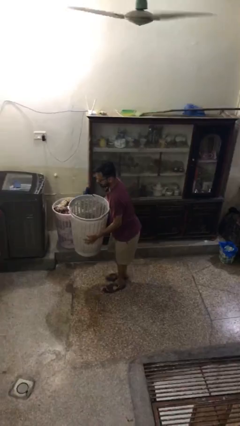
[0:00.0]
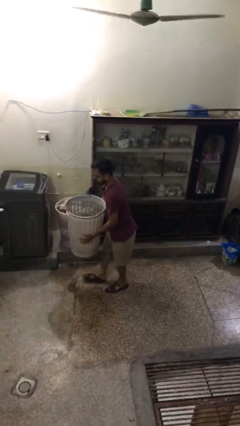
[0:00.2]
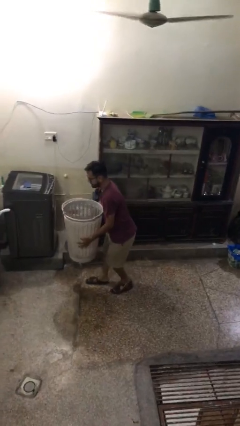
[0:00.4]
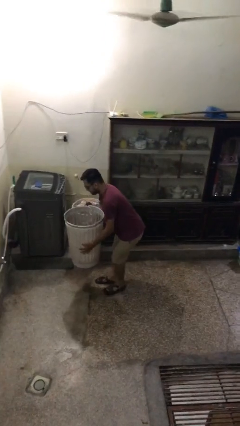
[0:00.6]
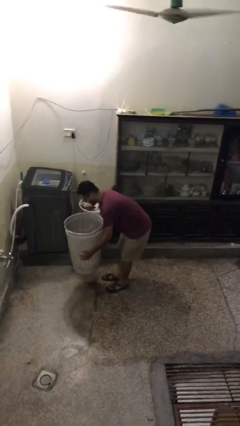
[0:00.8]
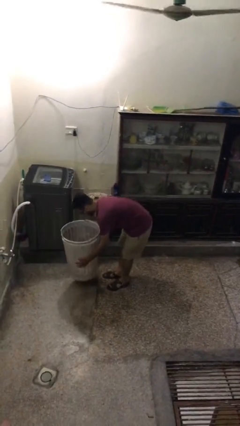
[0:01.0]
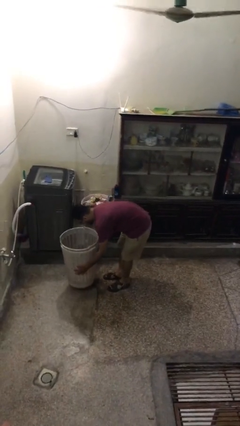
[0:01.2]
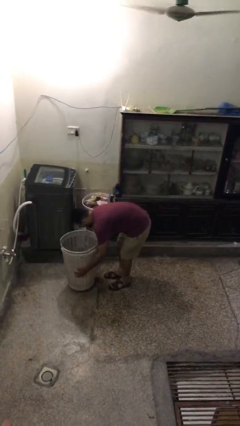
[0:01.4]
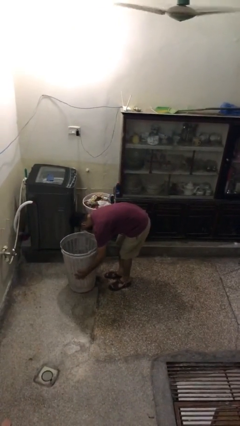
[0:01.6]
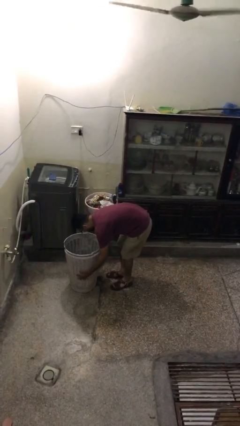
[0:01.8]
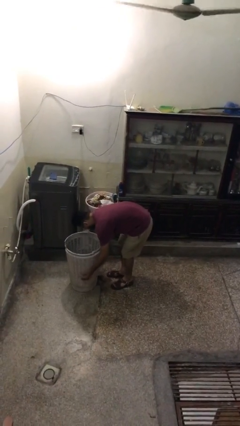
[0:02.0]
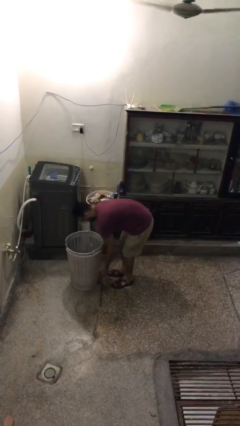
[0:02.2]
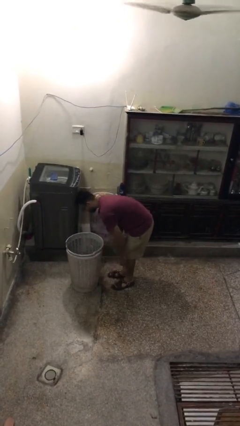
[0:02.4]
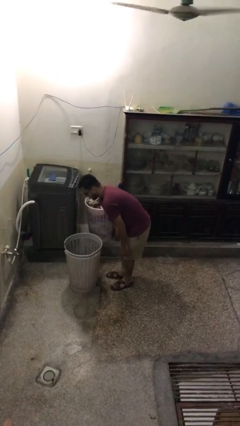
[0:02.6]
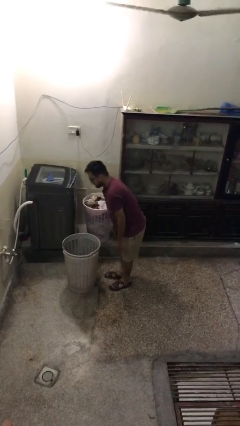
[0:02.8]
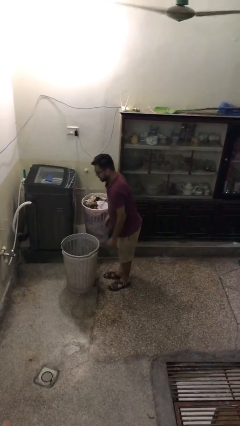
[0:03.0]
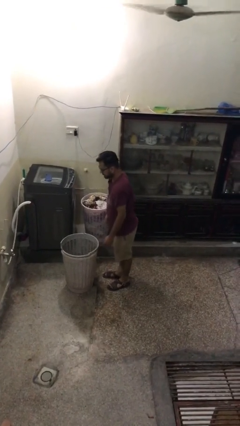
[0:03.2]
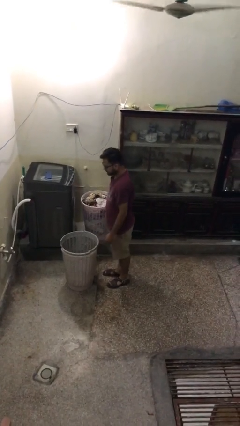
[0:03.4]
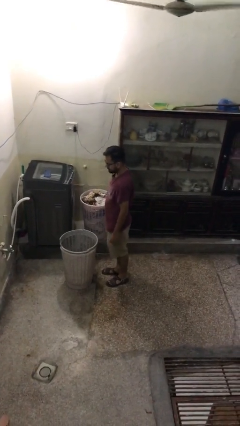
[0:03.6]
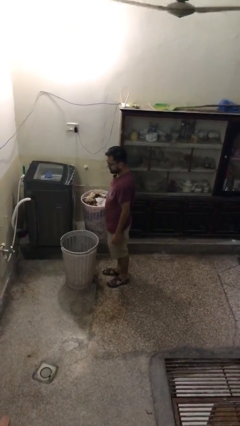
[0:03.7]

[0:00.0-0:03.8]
person puts down object on floor

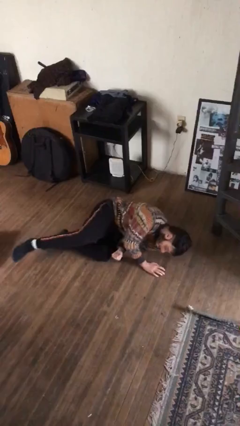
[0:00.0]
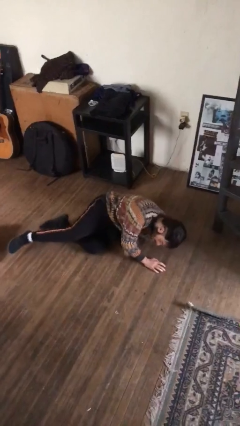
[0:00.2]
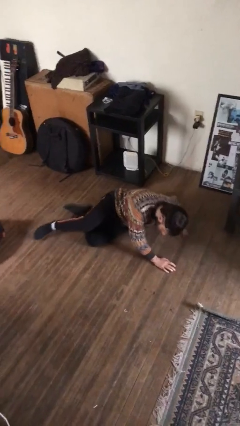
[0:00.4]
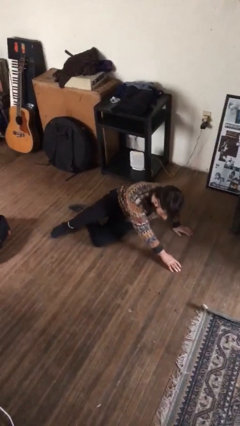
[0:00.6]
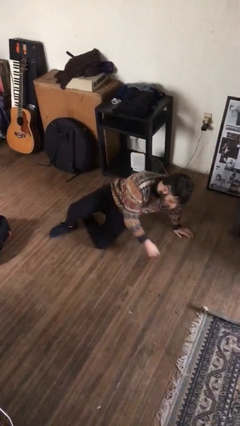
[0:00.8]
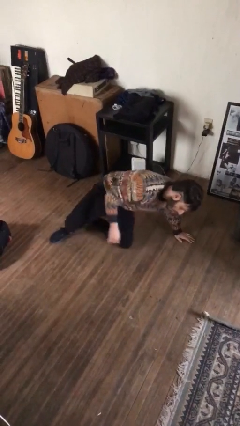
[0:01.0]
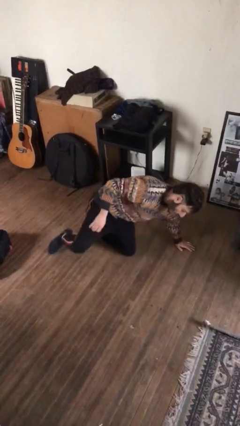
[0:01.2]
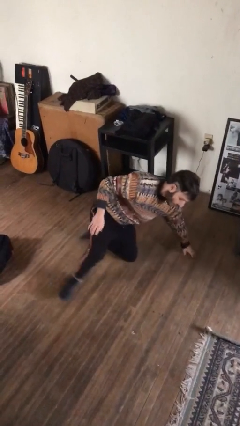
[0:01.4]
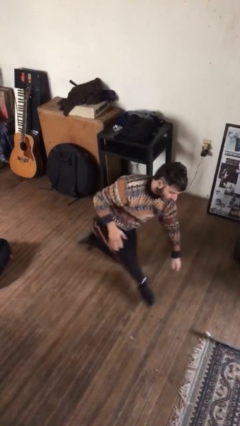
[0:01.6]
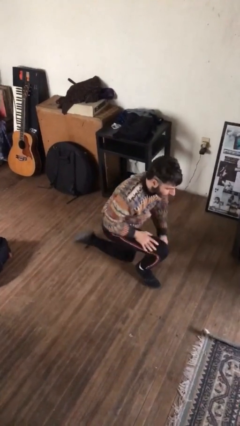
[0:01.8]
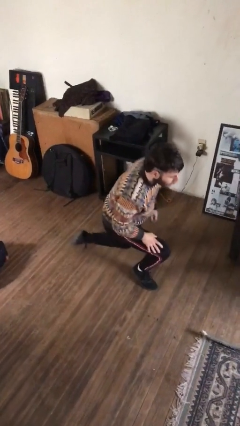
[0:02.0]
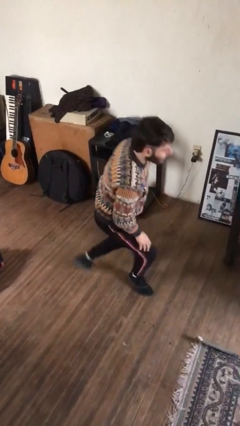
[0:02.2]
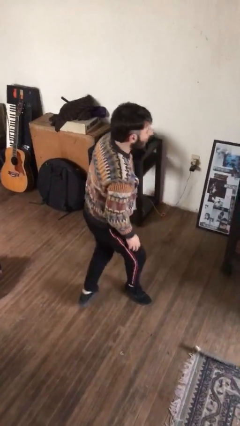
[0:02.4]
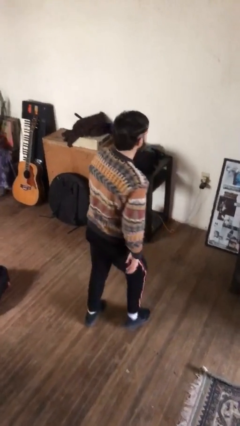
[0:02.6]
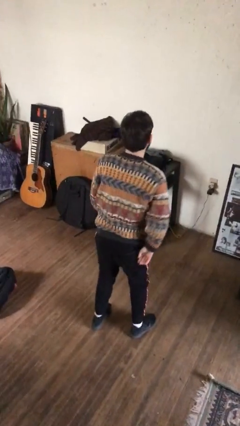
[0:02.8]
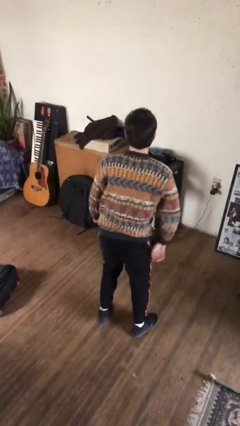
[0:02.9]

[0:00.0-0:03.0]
person stands up from floor

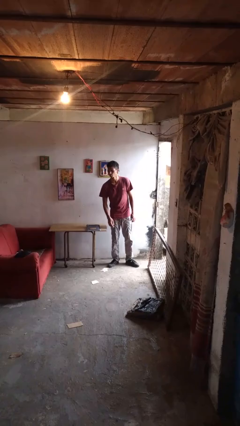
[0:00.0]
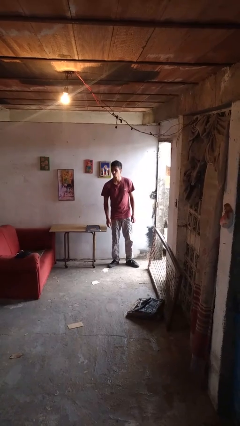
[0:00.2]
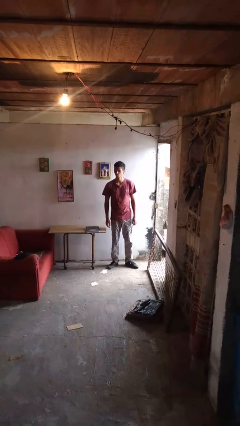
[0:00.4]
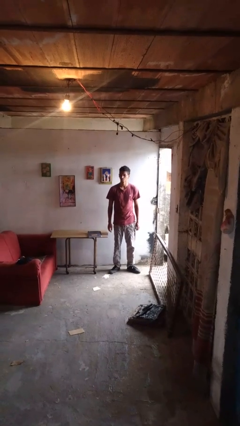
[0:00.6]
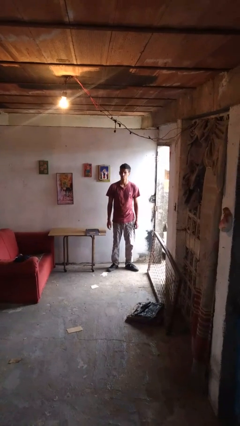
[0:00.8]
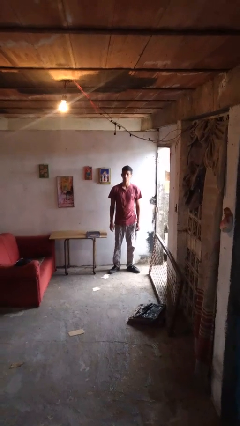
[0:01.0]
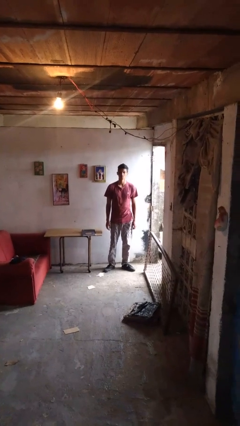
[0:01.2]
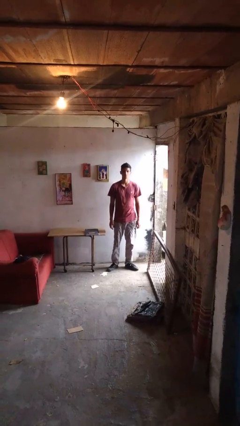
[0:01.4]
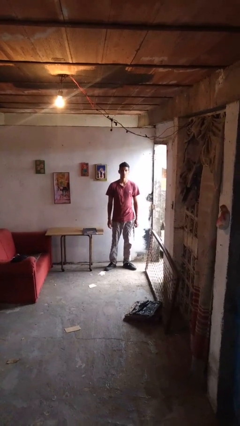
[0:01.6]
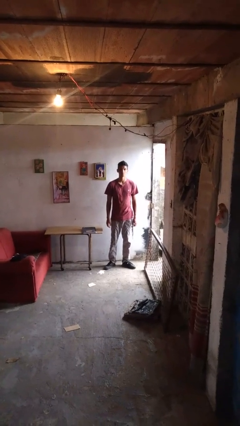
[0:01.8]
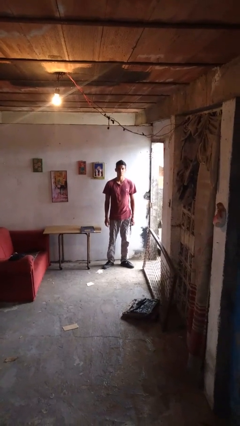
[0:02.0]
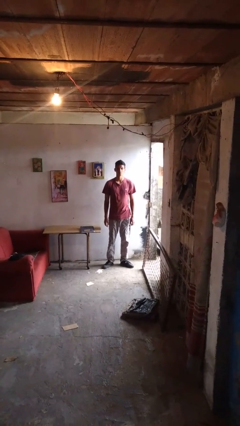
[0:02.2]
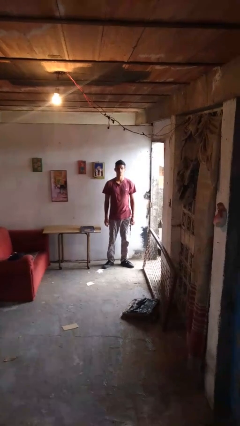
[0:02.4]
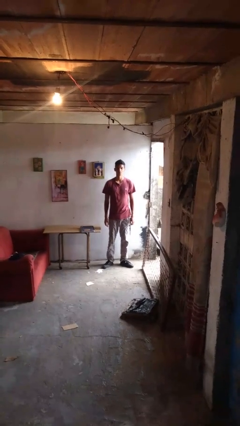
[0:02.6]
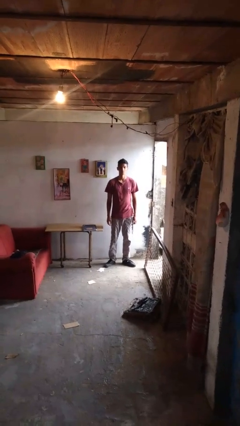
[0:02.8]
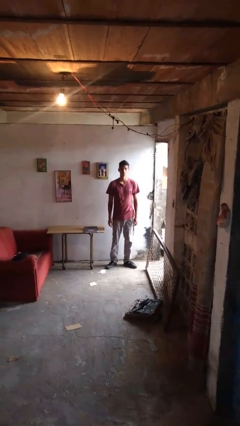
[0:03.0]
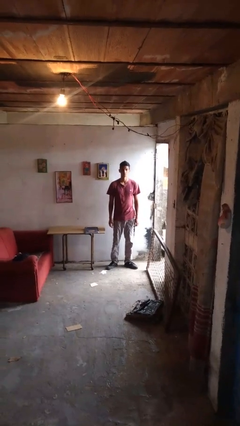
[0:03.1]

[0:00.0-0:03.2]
person picks up object from floor

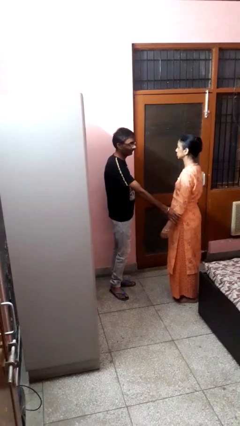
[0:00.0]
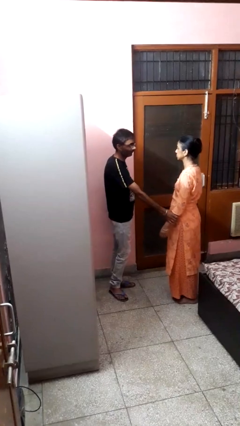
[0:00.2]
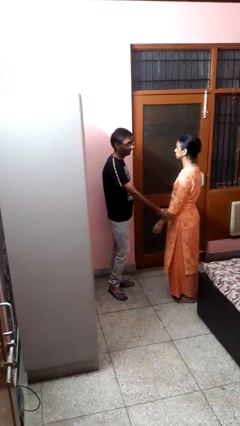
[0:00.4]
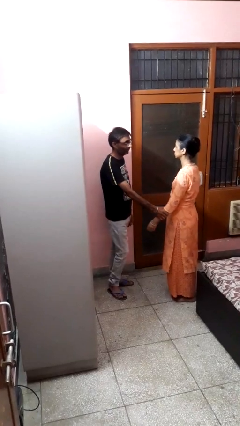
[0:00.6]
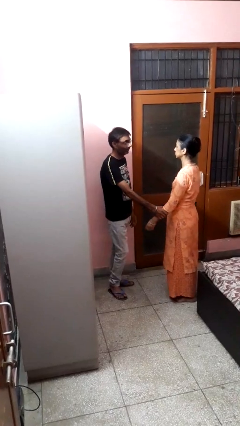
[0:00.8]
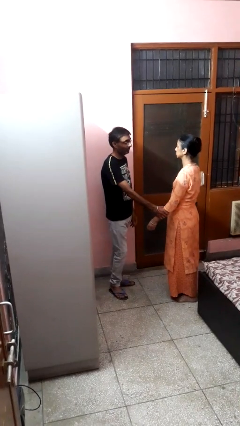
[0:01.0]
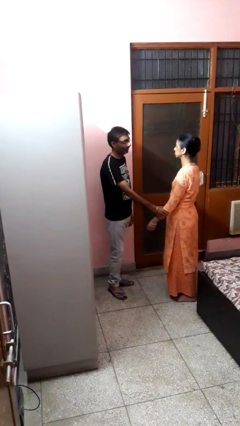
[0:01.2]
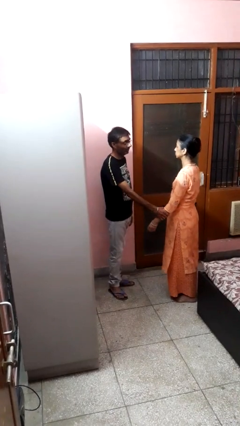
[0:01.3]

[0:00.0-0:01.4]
person grabs person by forearm

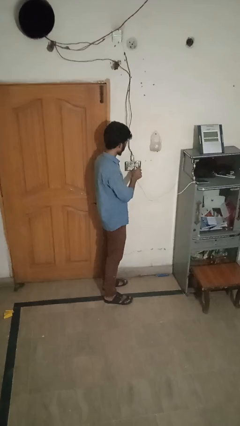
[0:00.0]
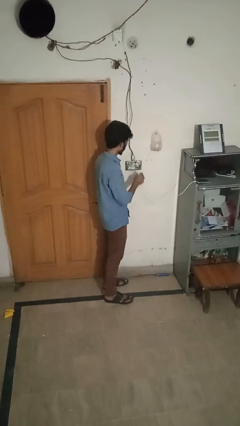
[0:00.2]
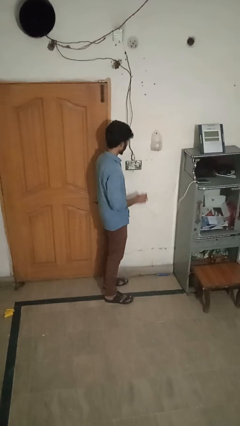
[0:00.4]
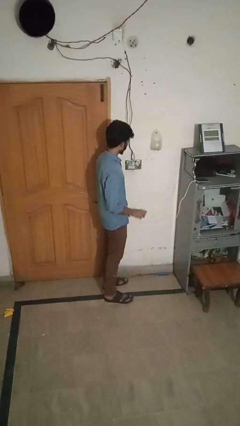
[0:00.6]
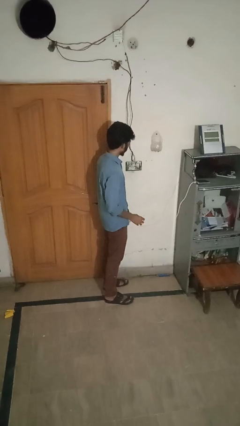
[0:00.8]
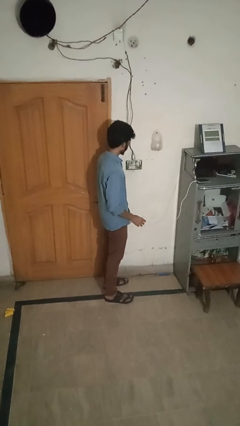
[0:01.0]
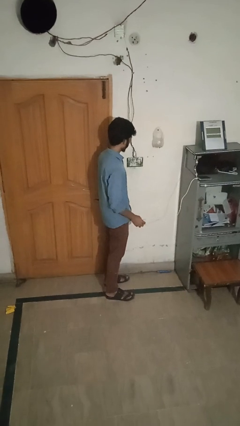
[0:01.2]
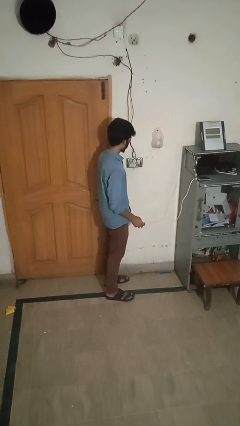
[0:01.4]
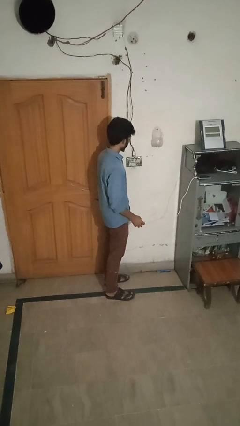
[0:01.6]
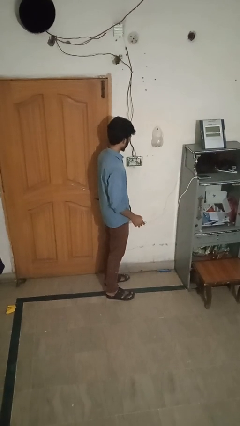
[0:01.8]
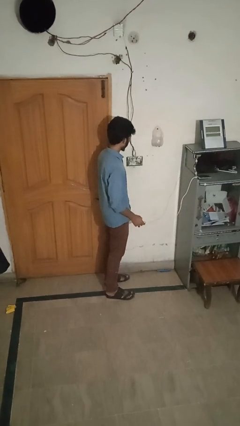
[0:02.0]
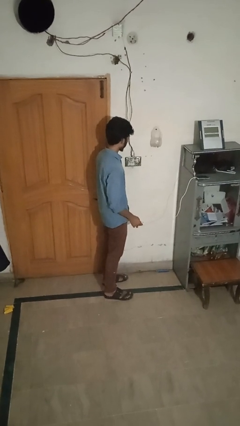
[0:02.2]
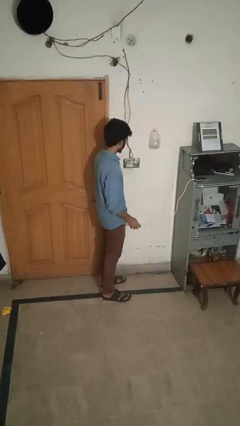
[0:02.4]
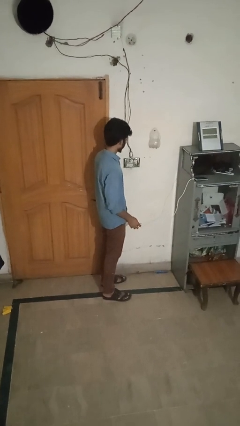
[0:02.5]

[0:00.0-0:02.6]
person unplugs from electrical socket

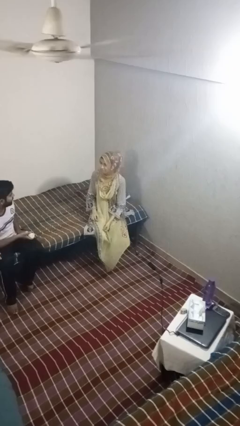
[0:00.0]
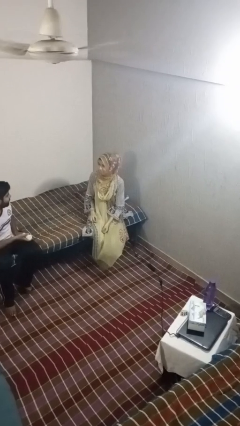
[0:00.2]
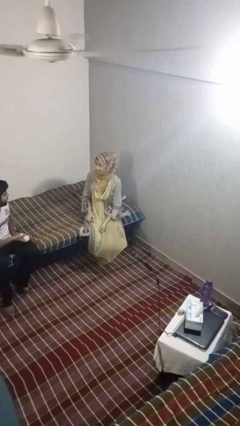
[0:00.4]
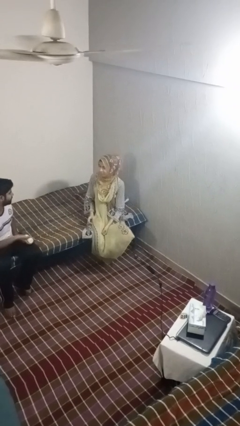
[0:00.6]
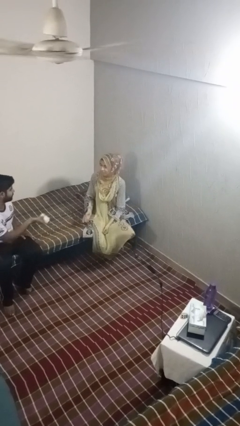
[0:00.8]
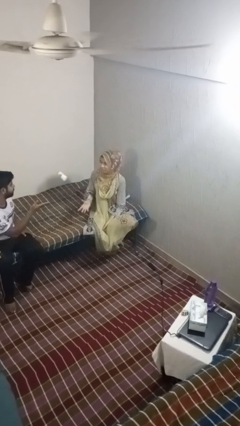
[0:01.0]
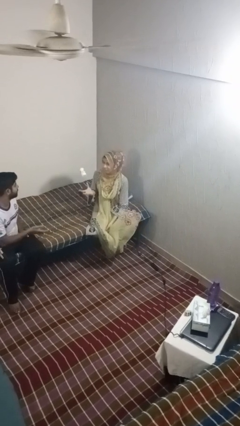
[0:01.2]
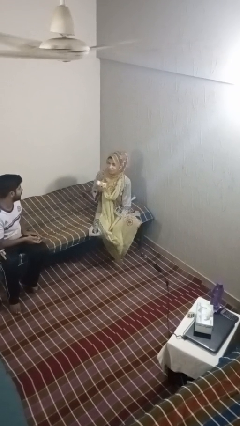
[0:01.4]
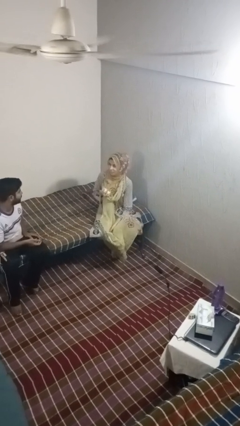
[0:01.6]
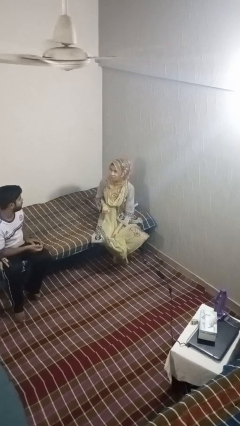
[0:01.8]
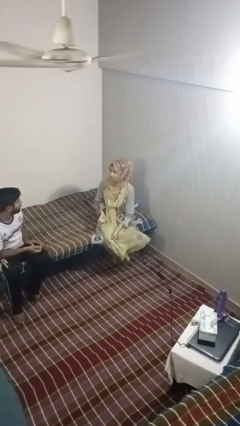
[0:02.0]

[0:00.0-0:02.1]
person catches object from person

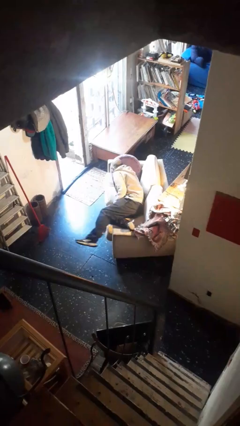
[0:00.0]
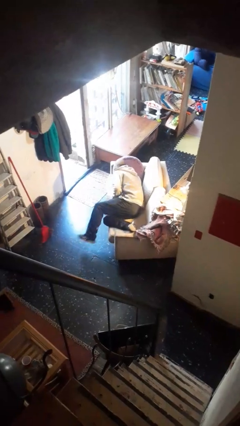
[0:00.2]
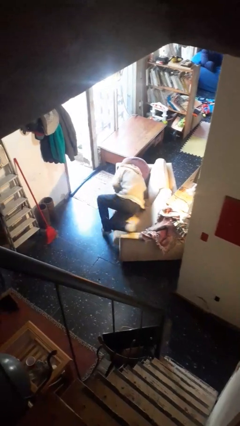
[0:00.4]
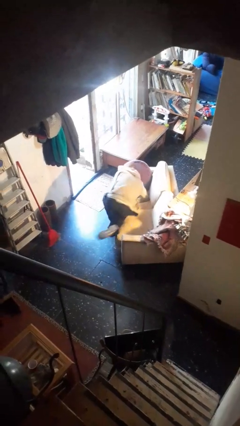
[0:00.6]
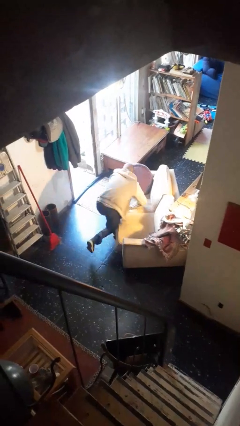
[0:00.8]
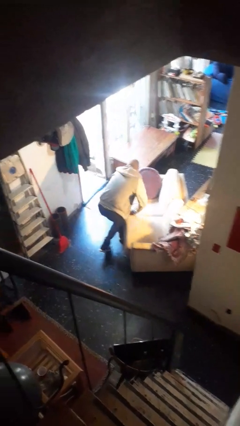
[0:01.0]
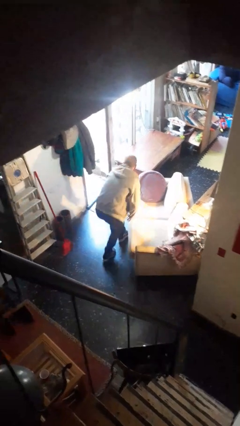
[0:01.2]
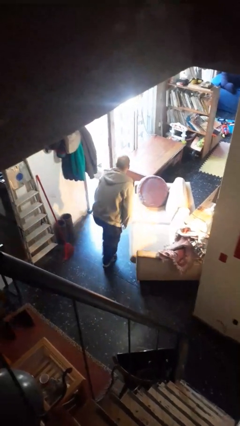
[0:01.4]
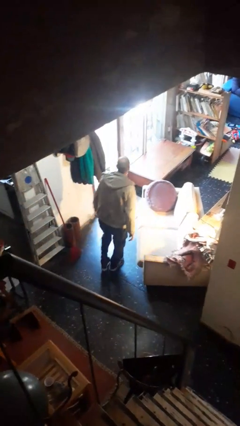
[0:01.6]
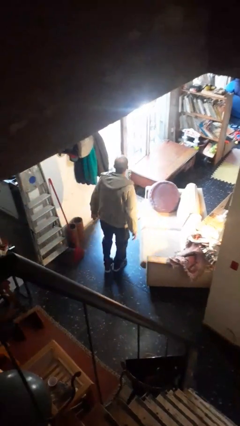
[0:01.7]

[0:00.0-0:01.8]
person stands up
